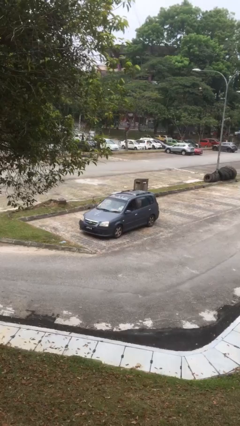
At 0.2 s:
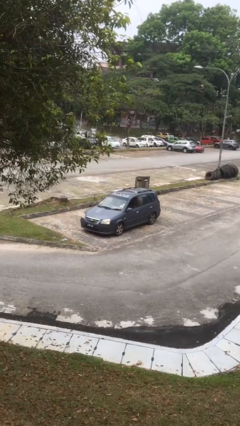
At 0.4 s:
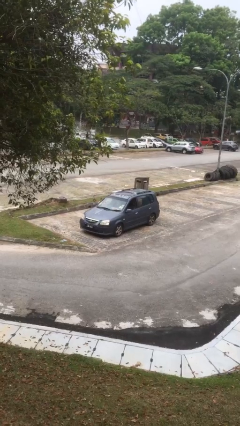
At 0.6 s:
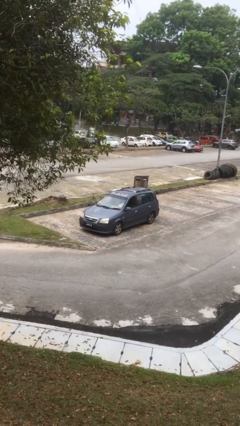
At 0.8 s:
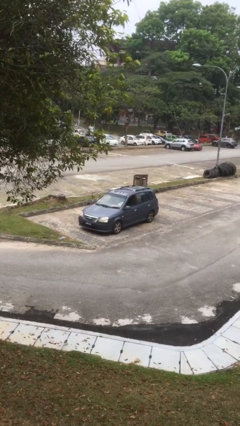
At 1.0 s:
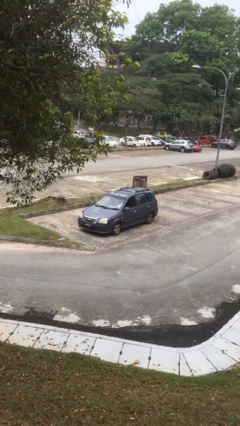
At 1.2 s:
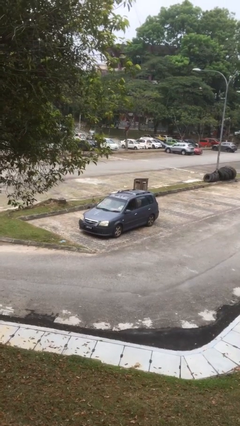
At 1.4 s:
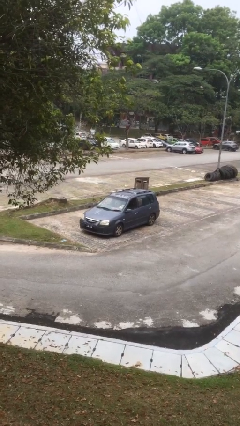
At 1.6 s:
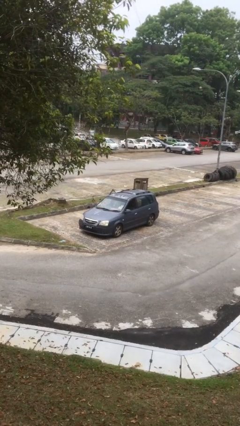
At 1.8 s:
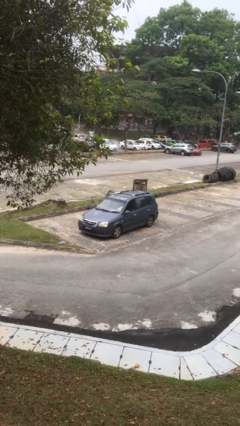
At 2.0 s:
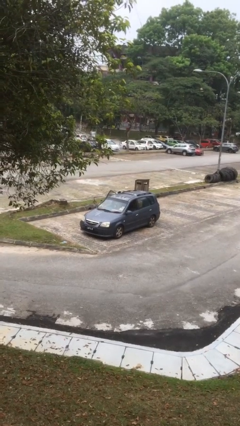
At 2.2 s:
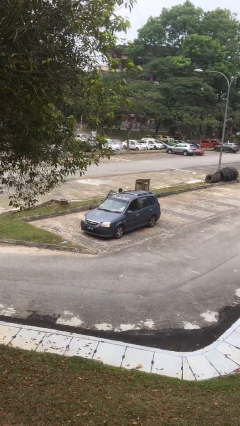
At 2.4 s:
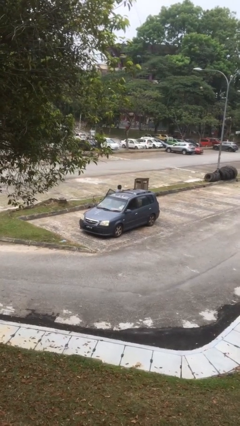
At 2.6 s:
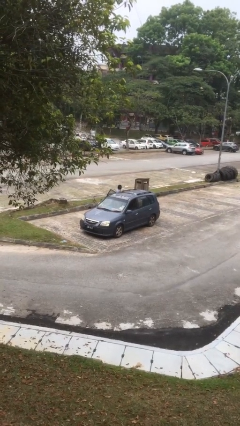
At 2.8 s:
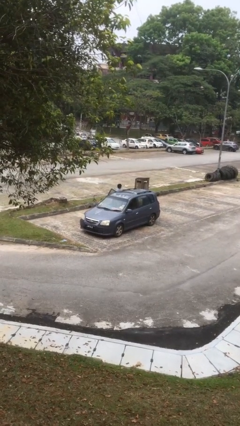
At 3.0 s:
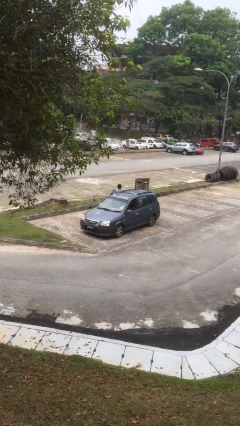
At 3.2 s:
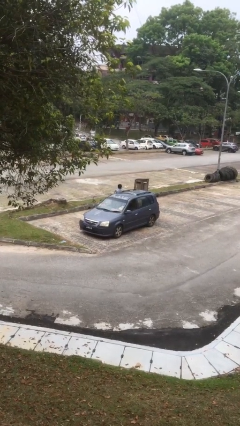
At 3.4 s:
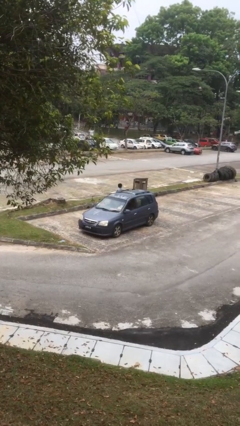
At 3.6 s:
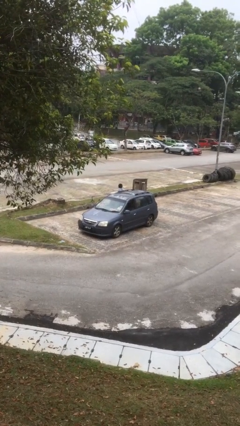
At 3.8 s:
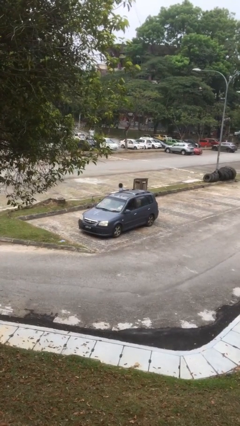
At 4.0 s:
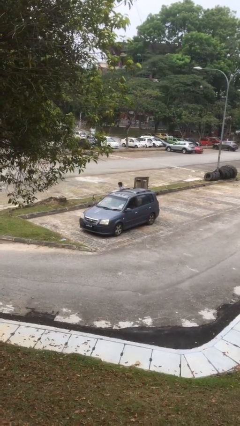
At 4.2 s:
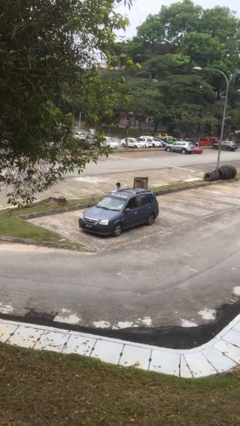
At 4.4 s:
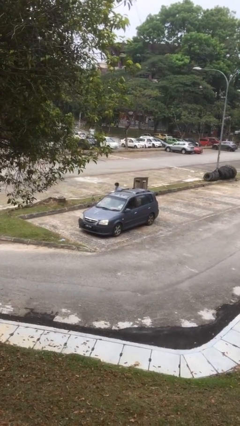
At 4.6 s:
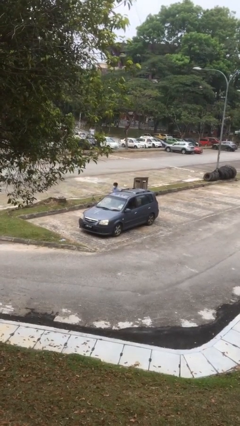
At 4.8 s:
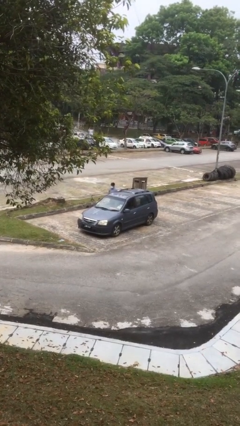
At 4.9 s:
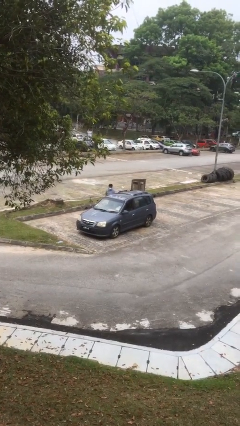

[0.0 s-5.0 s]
car drops off person

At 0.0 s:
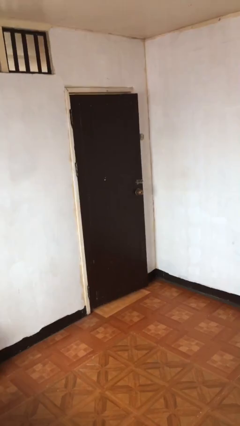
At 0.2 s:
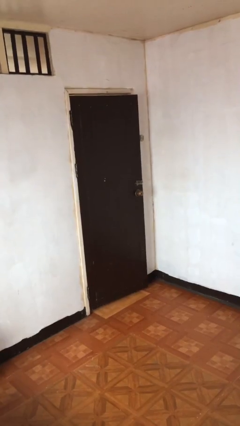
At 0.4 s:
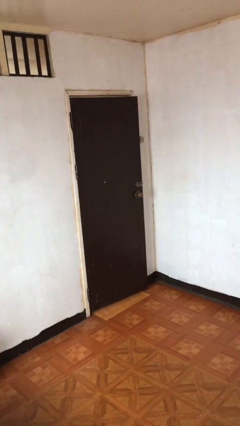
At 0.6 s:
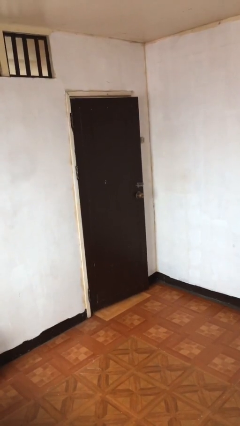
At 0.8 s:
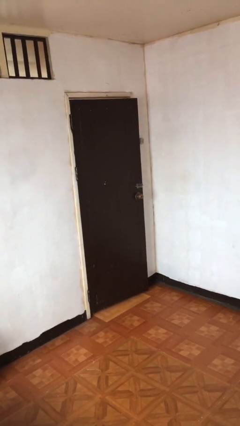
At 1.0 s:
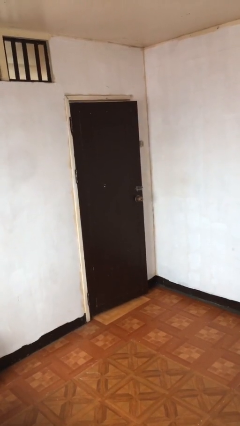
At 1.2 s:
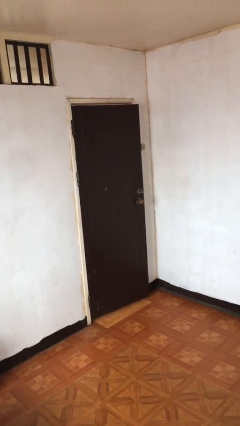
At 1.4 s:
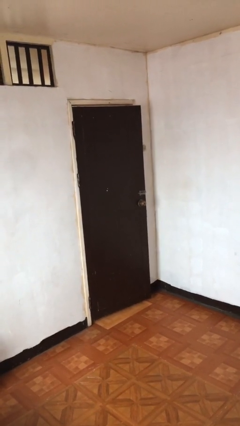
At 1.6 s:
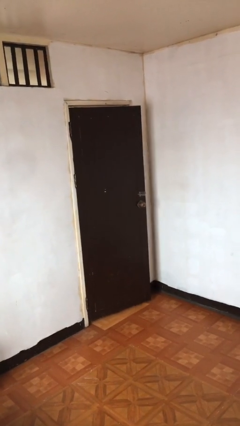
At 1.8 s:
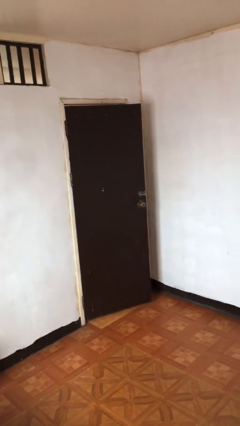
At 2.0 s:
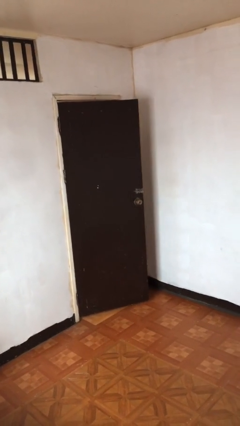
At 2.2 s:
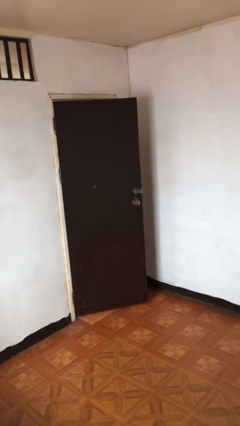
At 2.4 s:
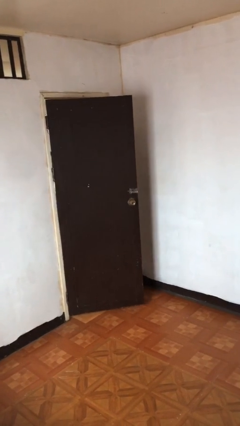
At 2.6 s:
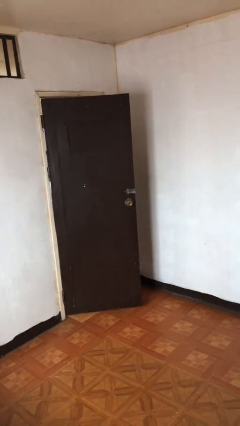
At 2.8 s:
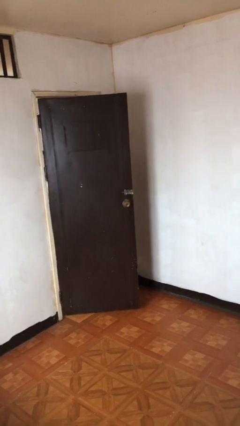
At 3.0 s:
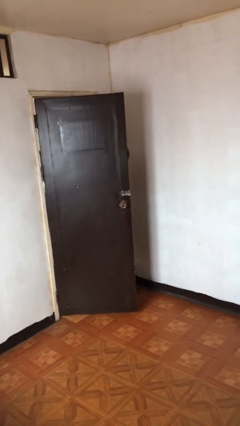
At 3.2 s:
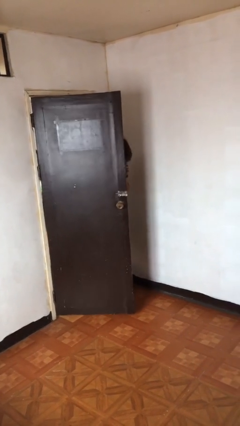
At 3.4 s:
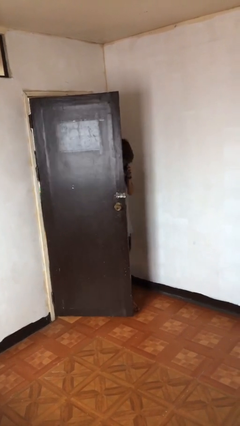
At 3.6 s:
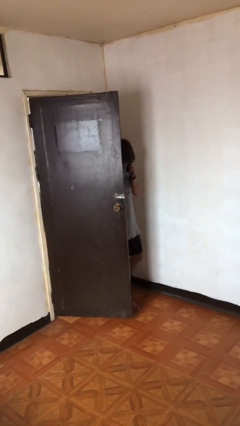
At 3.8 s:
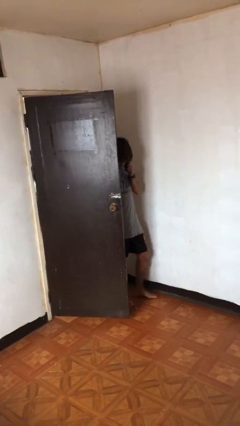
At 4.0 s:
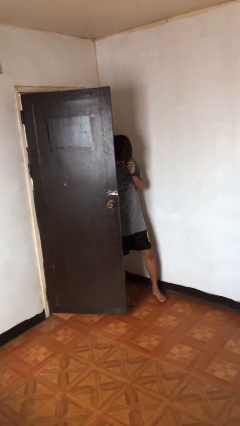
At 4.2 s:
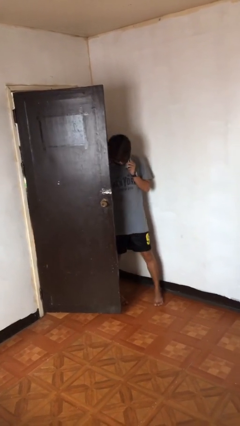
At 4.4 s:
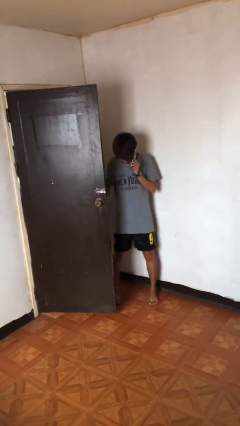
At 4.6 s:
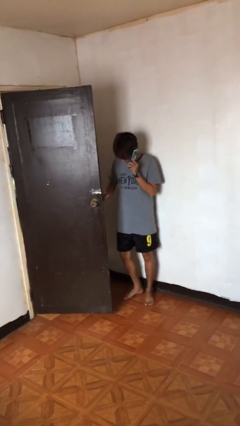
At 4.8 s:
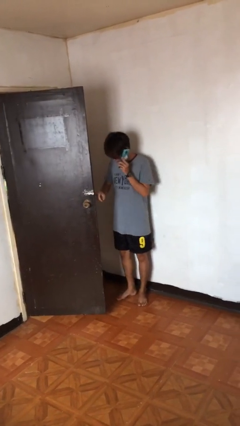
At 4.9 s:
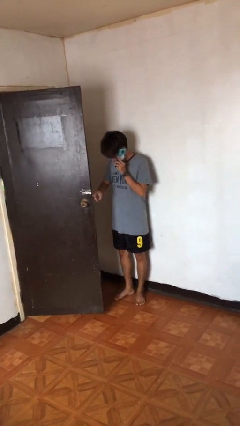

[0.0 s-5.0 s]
person opens facility door

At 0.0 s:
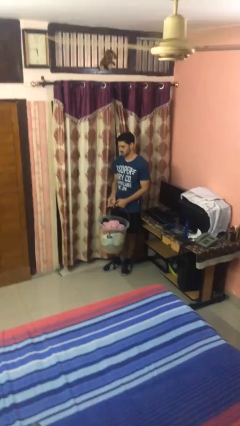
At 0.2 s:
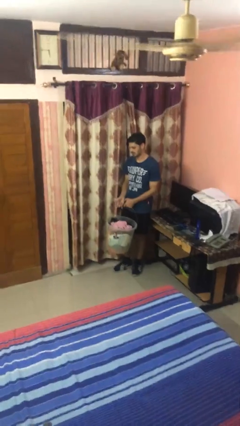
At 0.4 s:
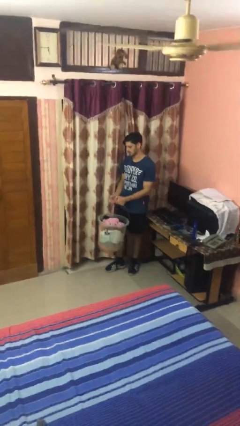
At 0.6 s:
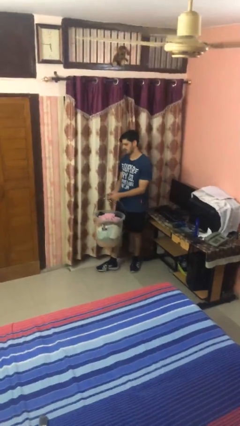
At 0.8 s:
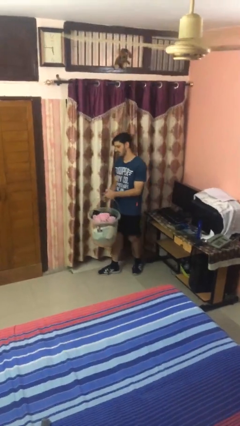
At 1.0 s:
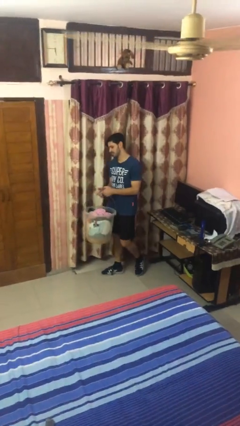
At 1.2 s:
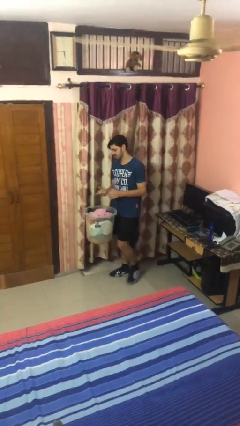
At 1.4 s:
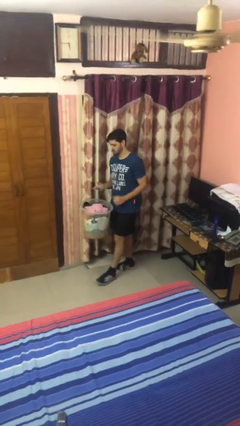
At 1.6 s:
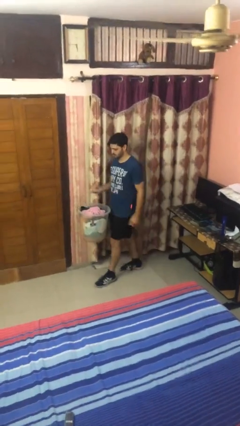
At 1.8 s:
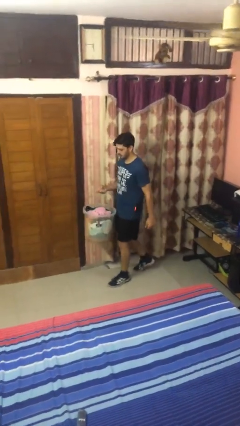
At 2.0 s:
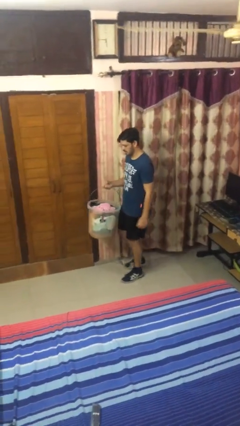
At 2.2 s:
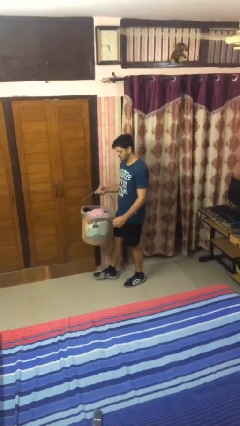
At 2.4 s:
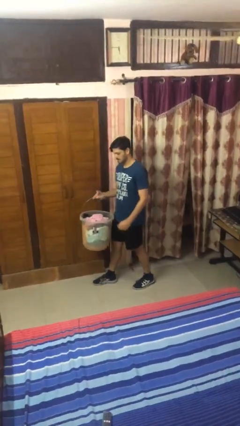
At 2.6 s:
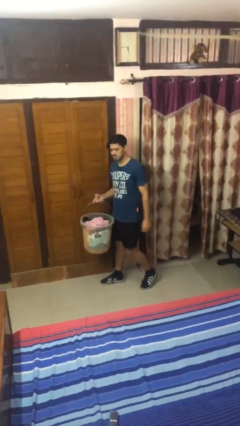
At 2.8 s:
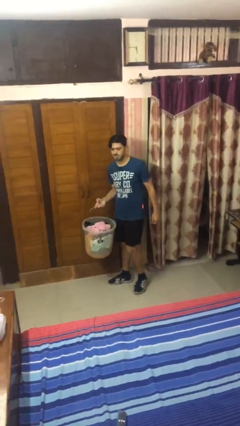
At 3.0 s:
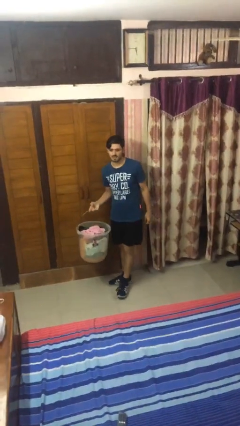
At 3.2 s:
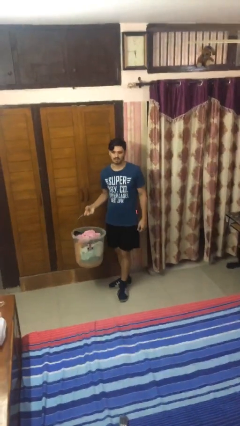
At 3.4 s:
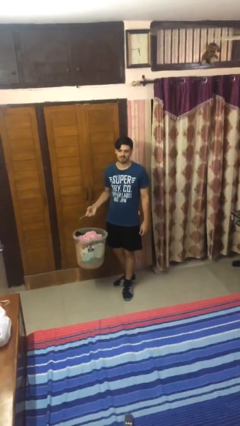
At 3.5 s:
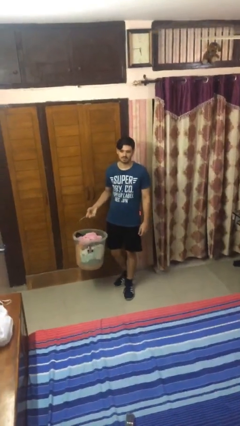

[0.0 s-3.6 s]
person carries laundry basket

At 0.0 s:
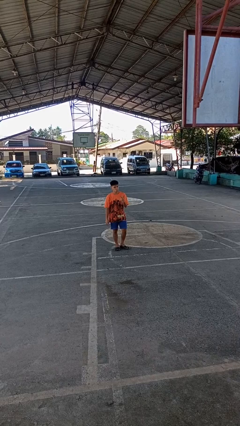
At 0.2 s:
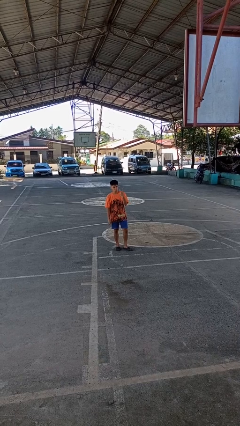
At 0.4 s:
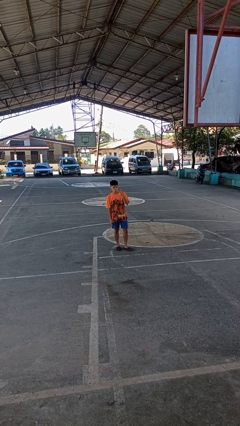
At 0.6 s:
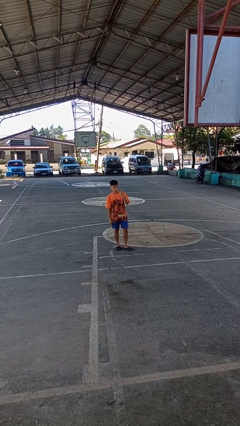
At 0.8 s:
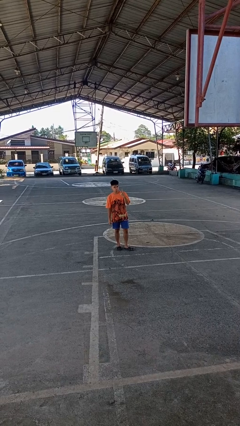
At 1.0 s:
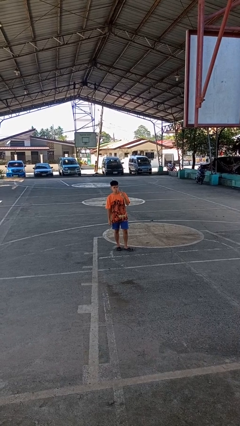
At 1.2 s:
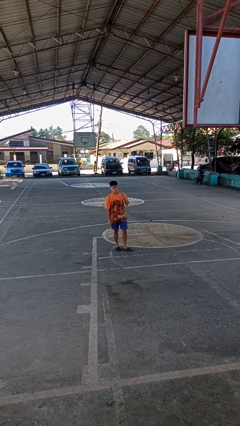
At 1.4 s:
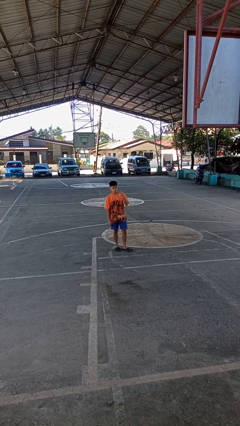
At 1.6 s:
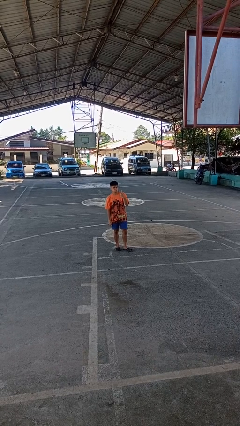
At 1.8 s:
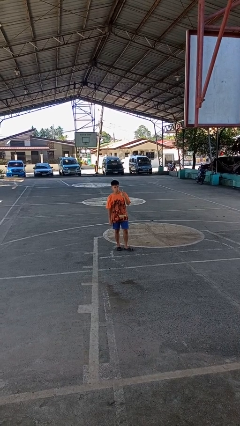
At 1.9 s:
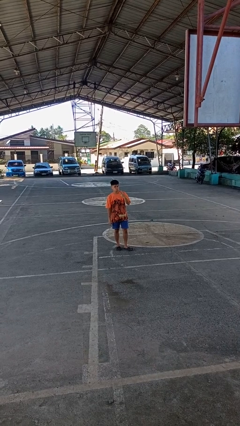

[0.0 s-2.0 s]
person gestures peace

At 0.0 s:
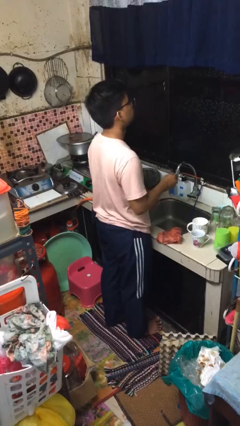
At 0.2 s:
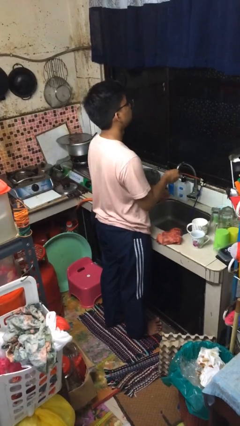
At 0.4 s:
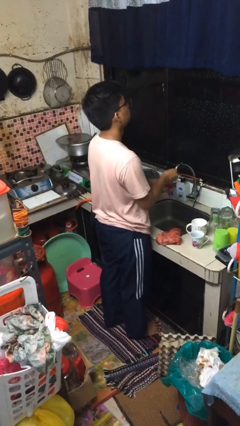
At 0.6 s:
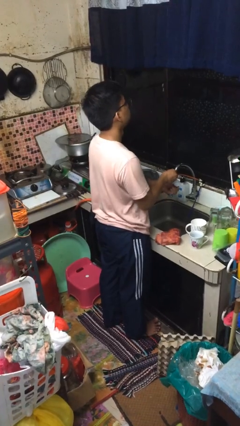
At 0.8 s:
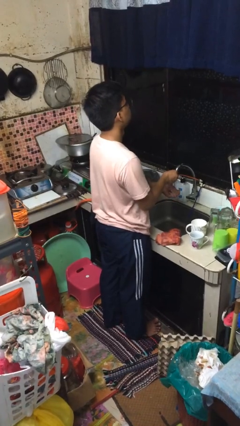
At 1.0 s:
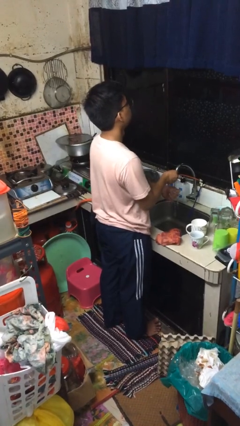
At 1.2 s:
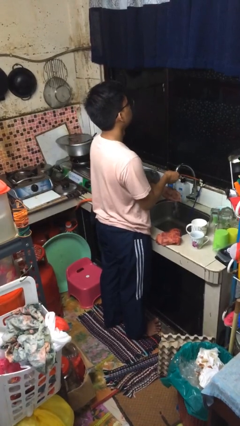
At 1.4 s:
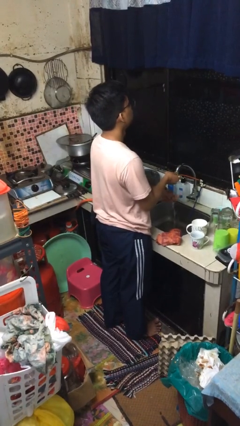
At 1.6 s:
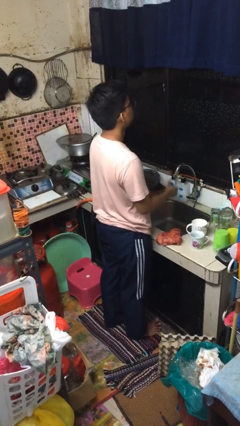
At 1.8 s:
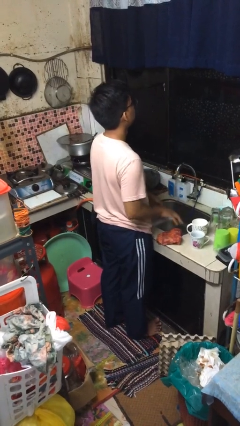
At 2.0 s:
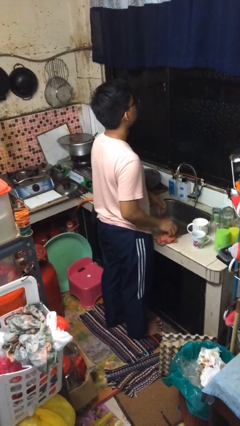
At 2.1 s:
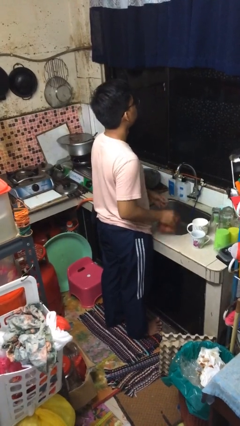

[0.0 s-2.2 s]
person washes hands
